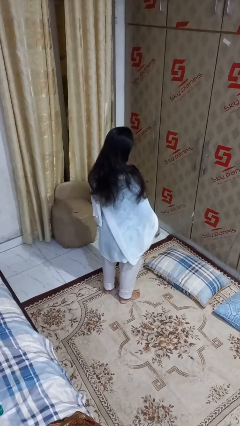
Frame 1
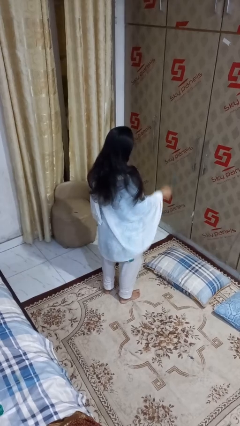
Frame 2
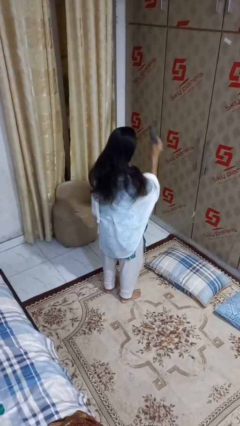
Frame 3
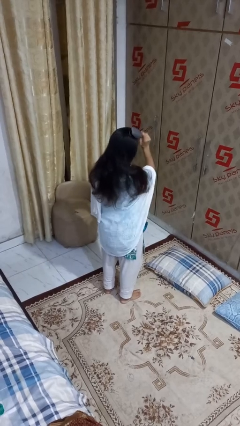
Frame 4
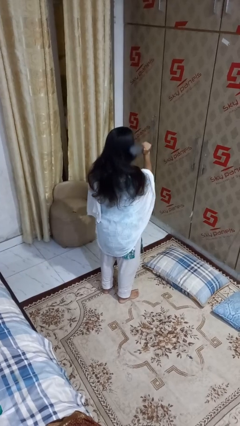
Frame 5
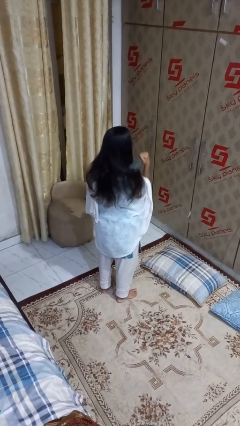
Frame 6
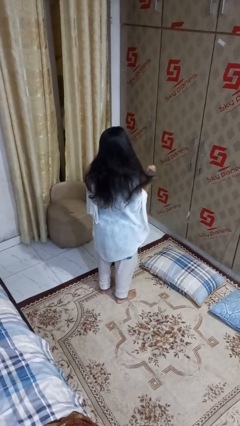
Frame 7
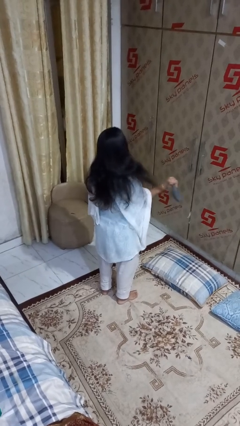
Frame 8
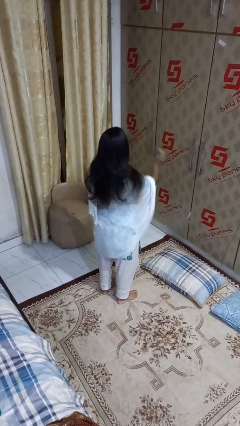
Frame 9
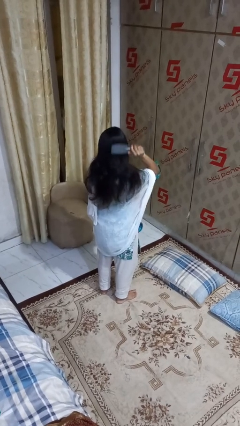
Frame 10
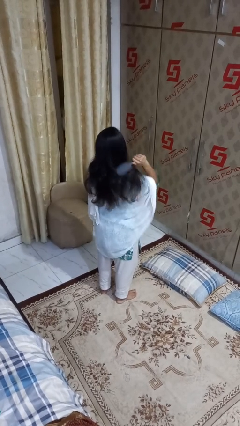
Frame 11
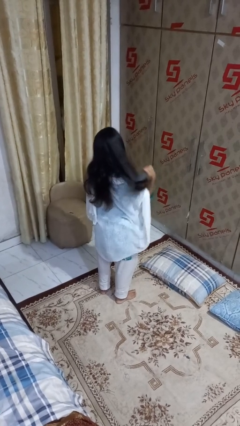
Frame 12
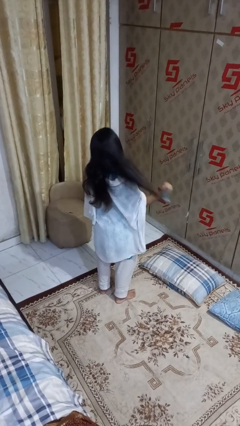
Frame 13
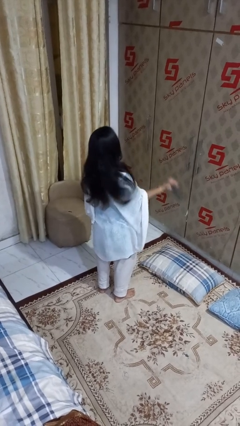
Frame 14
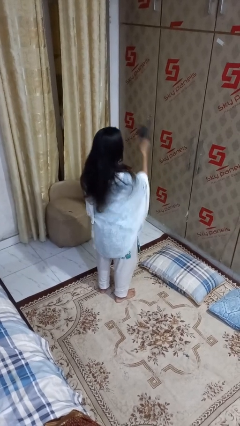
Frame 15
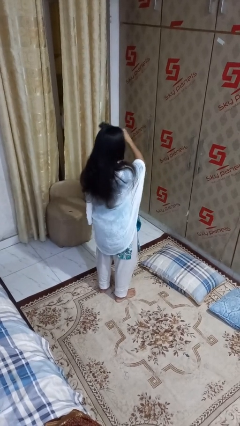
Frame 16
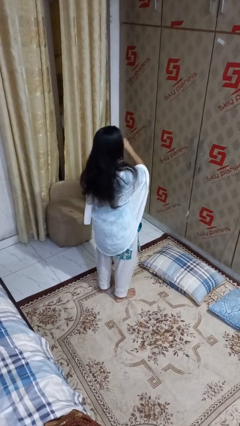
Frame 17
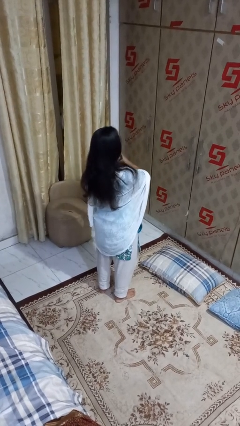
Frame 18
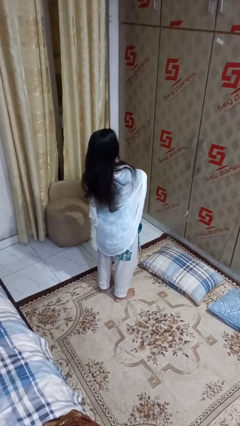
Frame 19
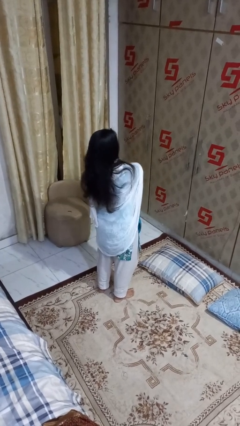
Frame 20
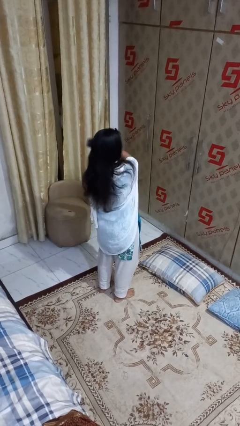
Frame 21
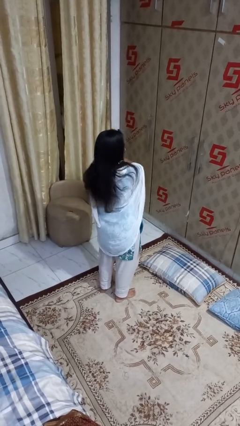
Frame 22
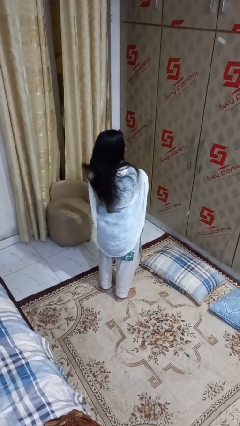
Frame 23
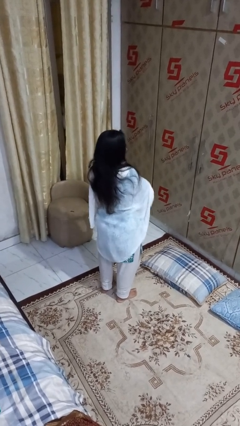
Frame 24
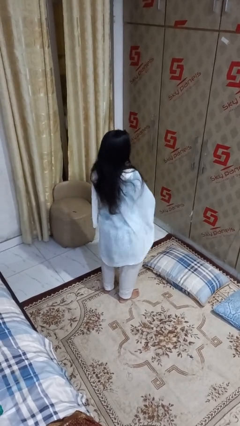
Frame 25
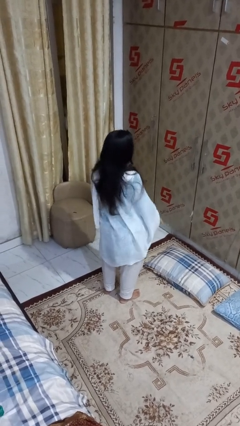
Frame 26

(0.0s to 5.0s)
person brushes hair

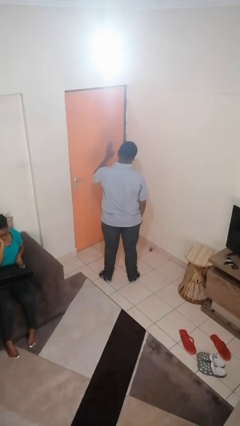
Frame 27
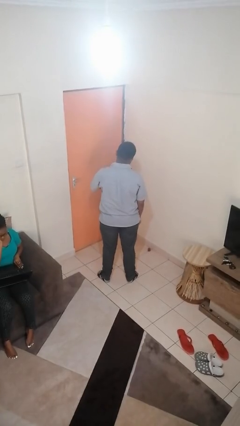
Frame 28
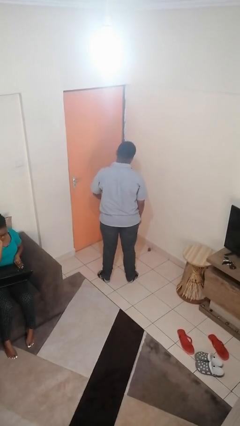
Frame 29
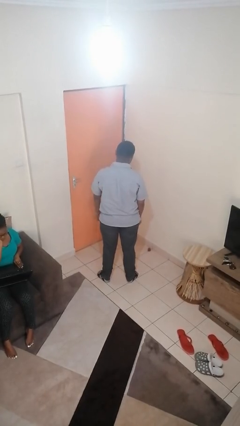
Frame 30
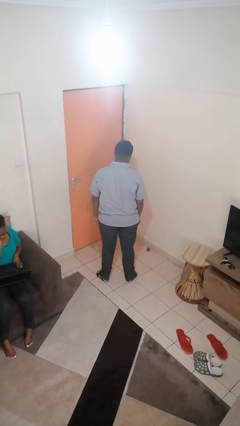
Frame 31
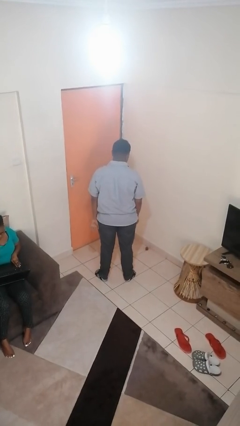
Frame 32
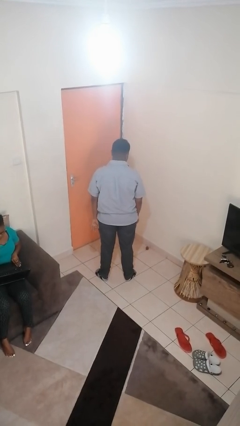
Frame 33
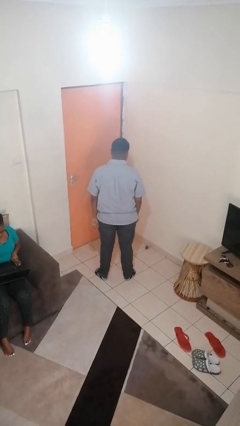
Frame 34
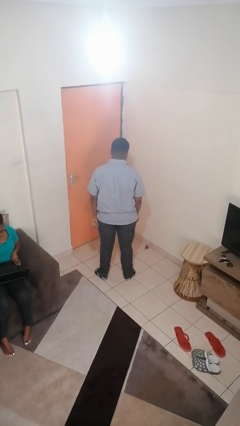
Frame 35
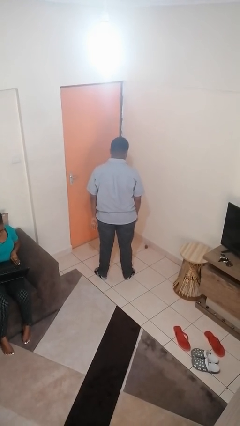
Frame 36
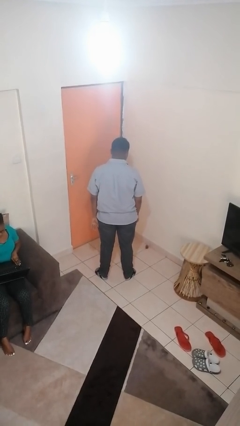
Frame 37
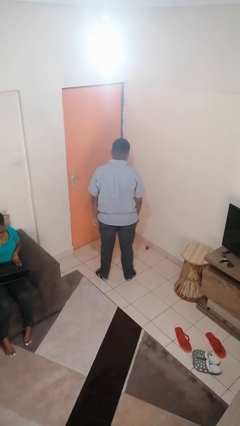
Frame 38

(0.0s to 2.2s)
person gestures lower hand

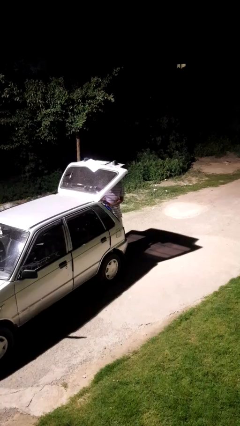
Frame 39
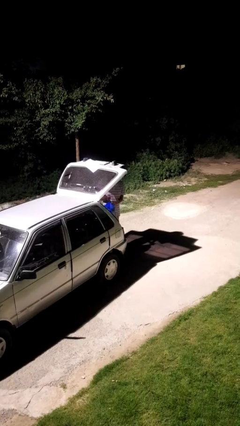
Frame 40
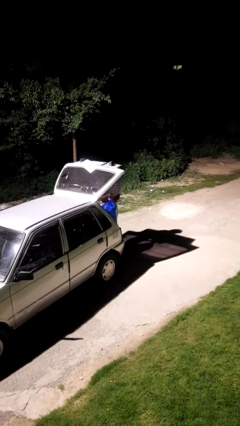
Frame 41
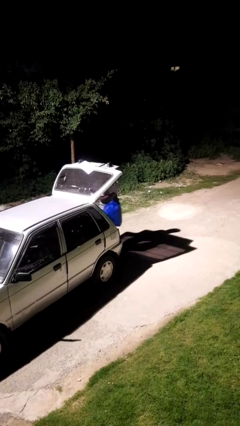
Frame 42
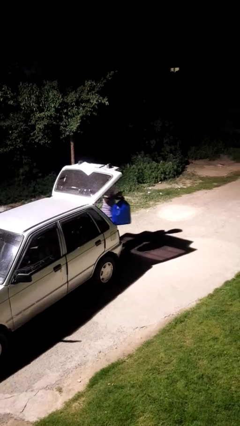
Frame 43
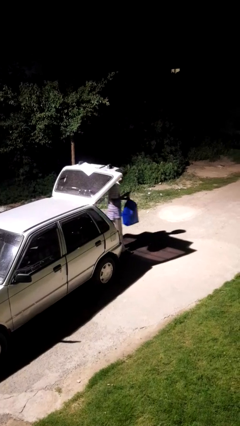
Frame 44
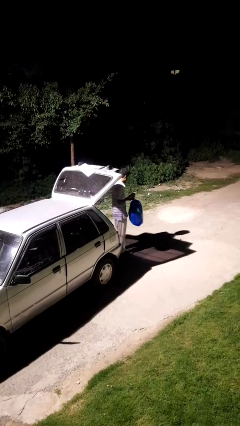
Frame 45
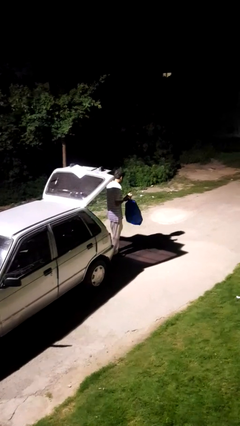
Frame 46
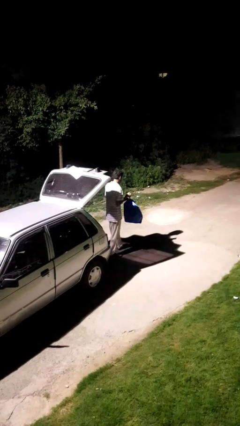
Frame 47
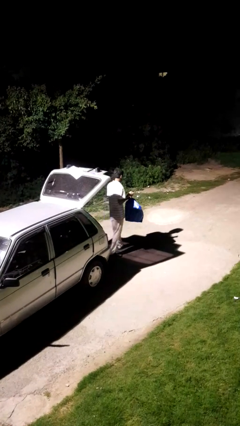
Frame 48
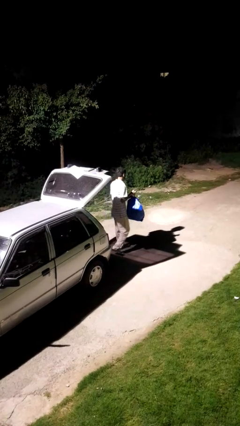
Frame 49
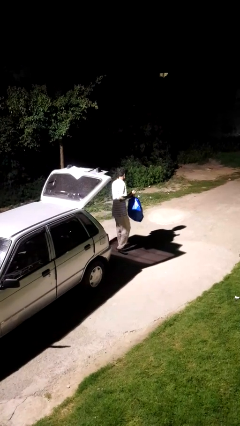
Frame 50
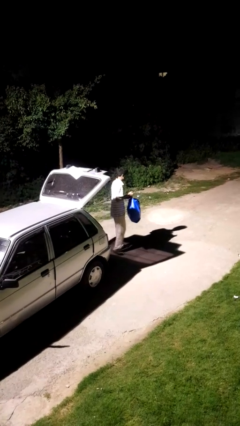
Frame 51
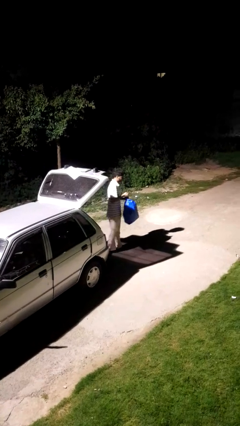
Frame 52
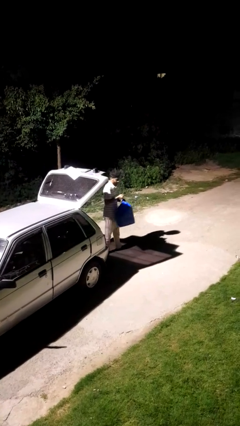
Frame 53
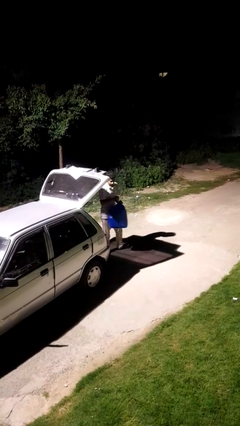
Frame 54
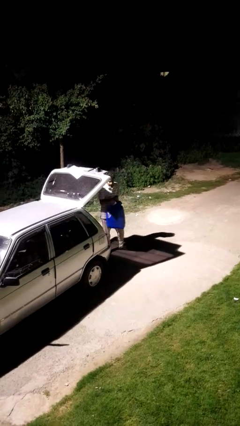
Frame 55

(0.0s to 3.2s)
person unloads car

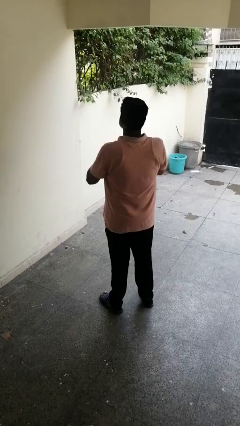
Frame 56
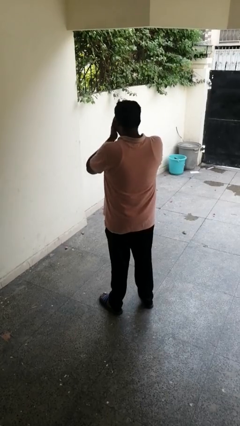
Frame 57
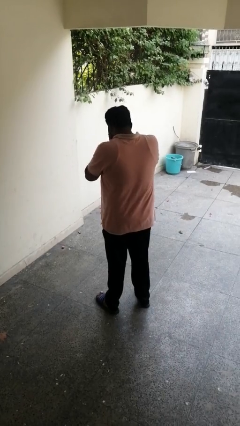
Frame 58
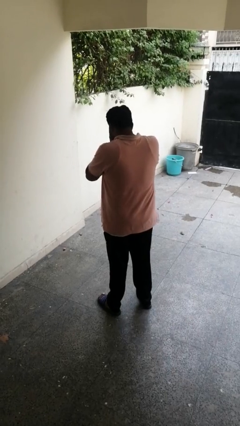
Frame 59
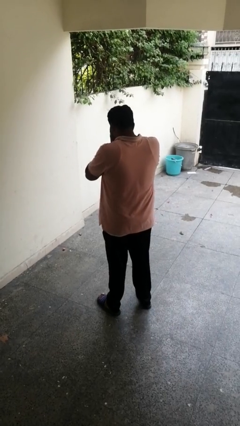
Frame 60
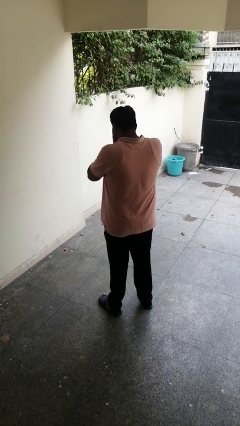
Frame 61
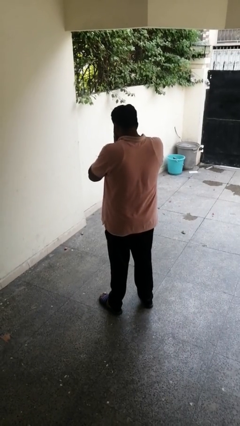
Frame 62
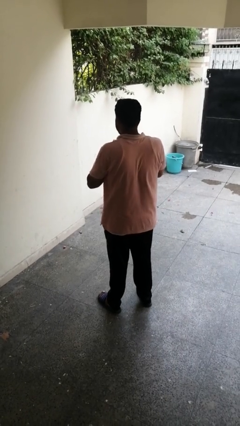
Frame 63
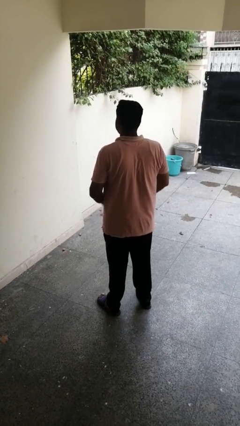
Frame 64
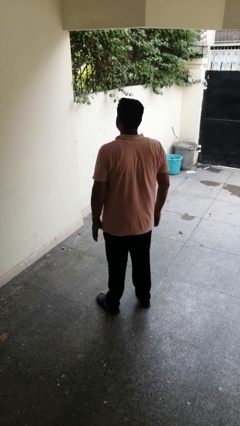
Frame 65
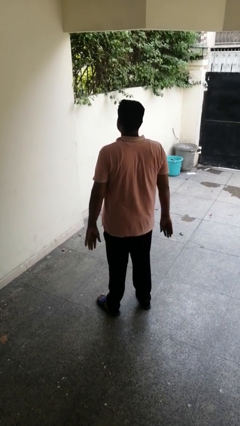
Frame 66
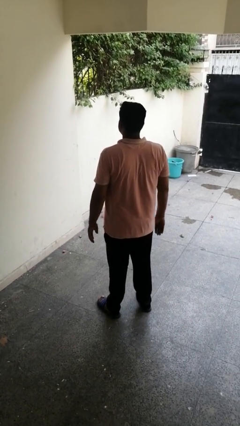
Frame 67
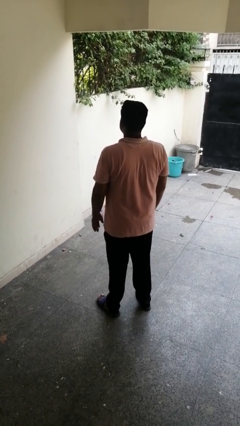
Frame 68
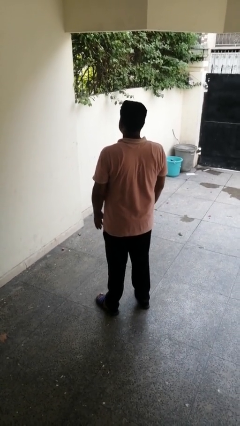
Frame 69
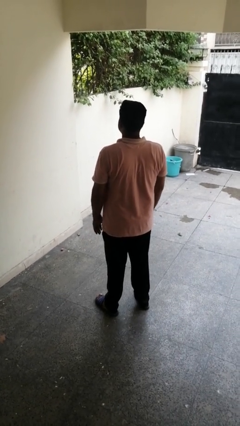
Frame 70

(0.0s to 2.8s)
person sneezes into hand

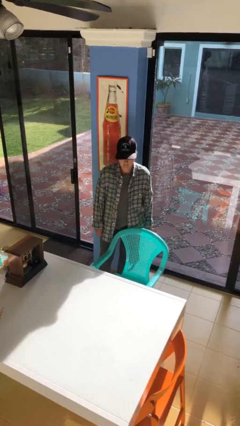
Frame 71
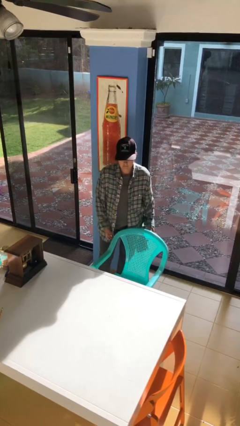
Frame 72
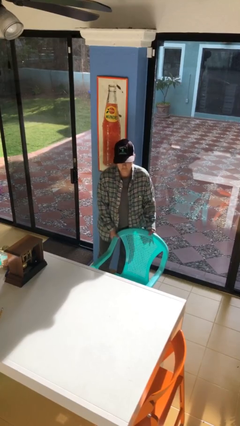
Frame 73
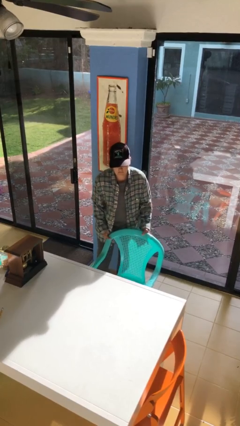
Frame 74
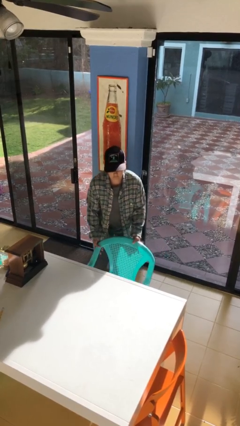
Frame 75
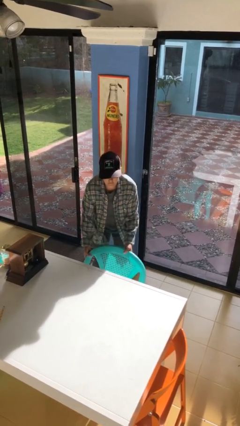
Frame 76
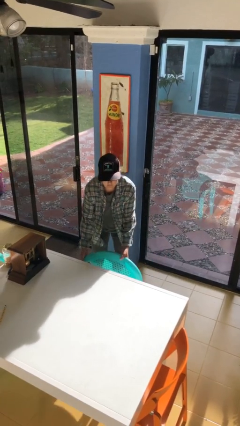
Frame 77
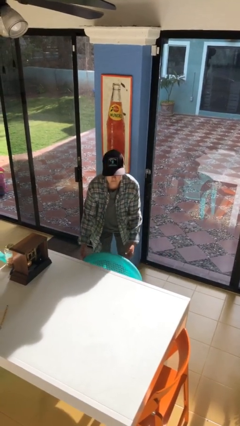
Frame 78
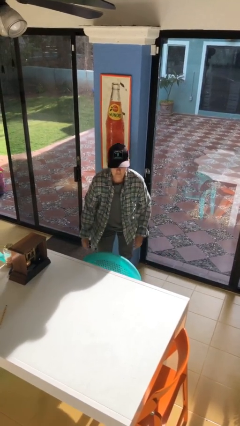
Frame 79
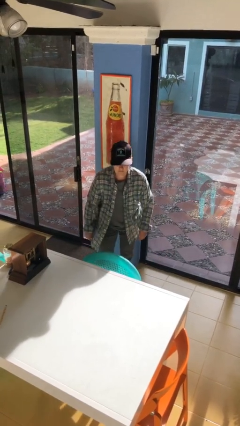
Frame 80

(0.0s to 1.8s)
person pushes in chair

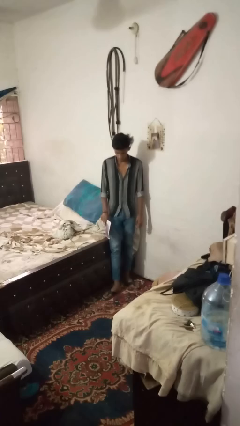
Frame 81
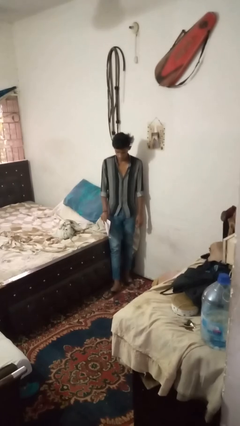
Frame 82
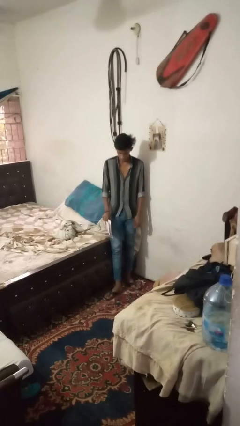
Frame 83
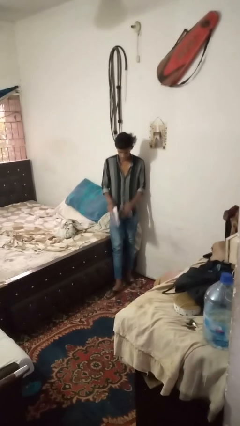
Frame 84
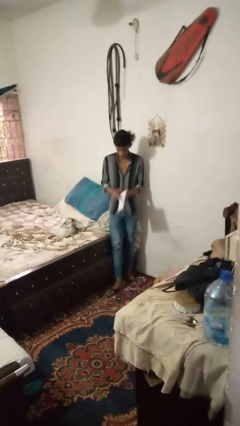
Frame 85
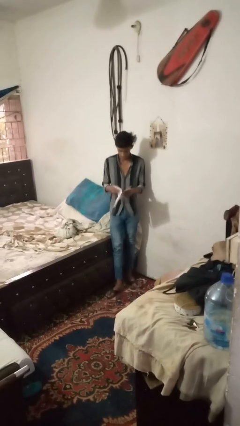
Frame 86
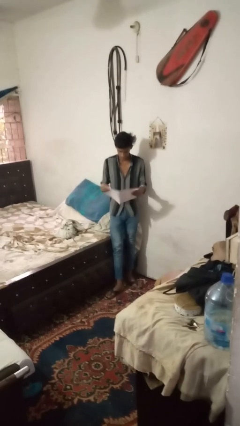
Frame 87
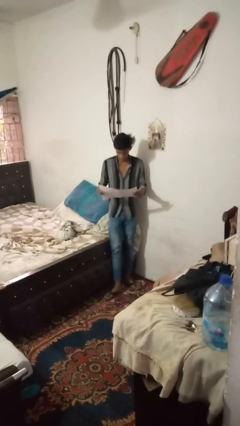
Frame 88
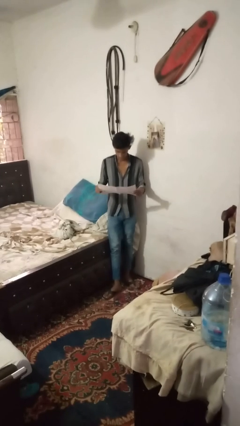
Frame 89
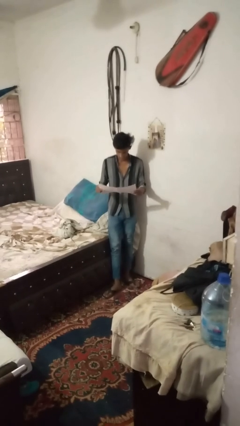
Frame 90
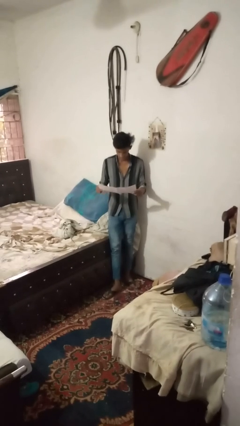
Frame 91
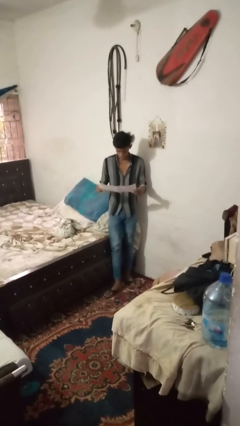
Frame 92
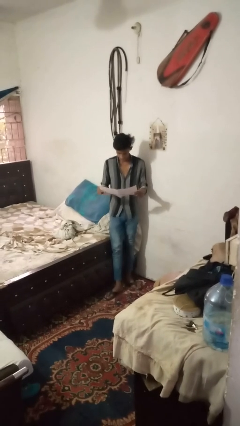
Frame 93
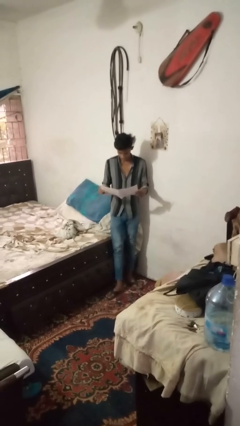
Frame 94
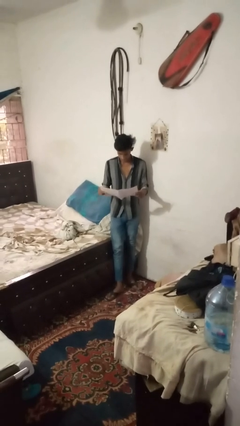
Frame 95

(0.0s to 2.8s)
person reads newspaper
